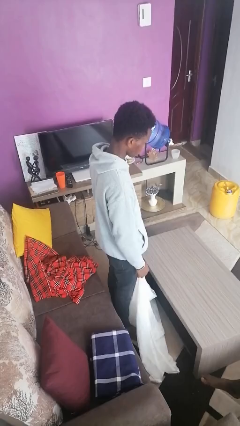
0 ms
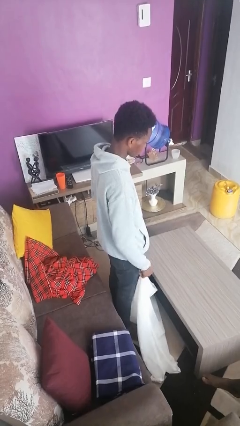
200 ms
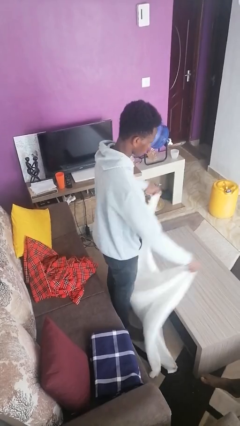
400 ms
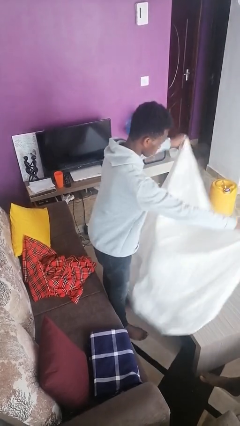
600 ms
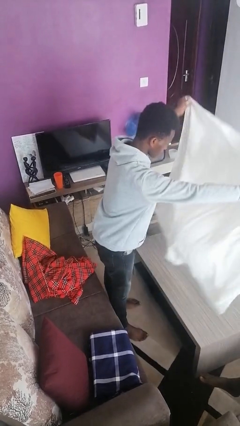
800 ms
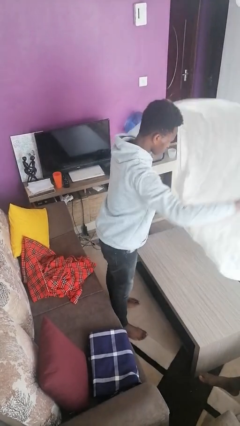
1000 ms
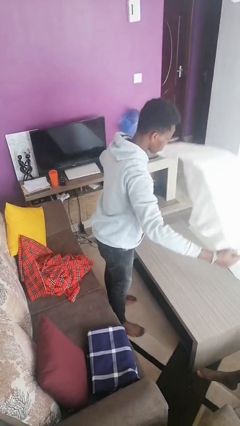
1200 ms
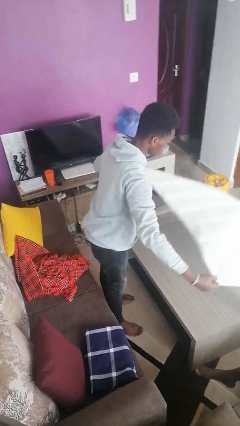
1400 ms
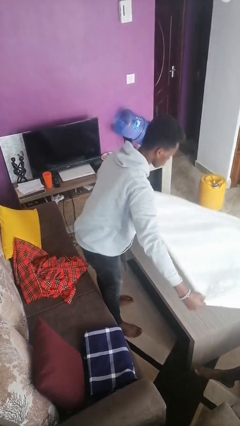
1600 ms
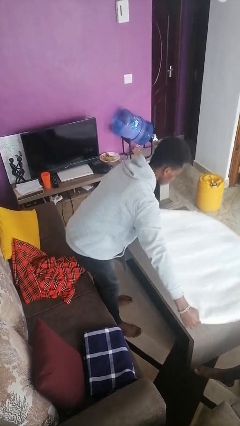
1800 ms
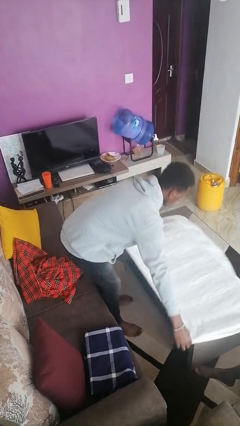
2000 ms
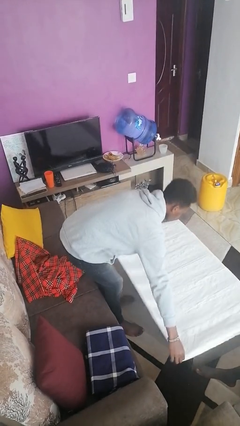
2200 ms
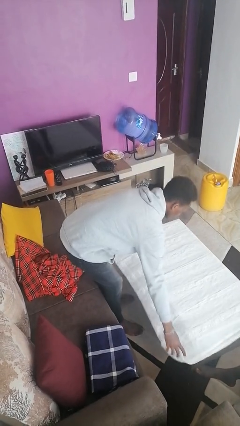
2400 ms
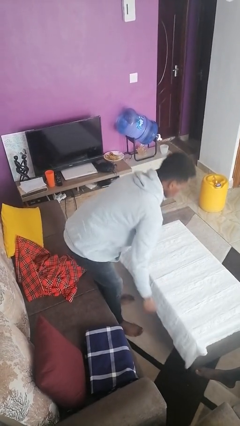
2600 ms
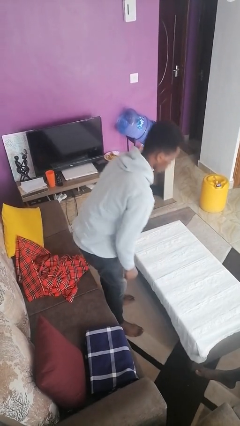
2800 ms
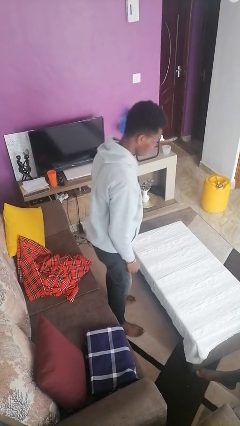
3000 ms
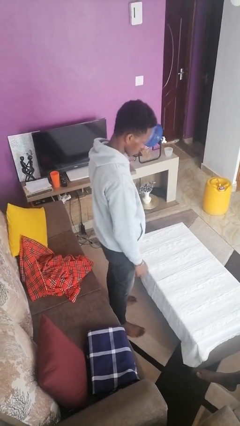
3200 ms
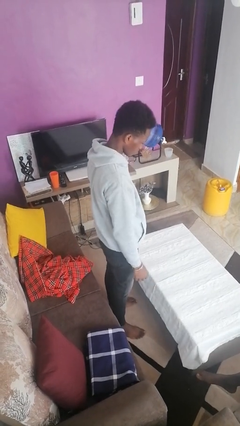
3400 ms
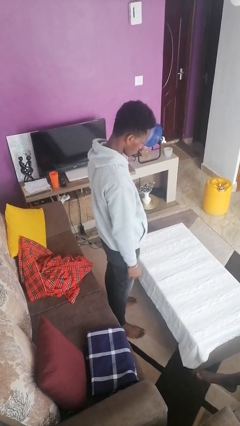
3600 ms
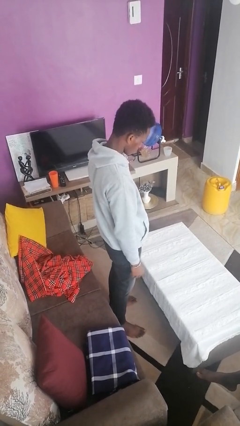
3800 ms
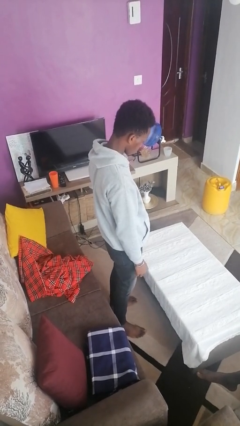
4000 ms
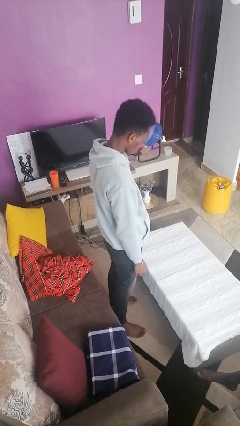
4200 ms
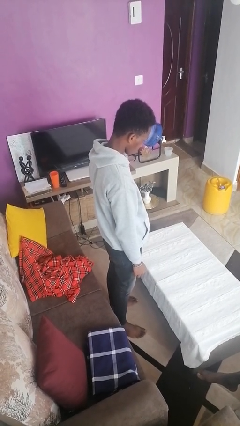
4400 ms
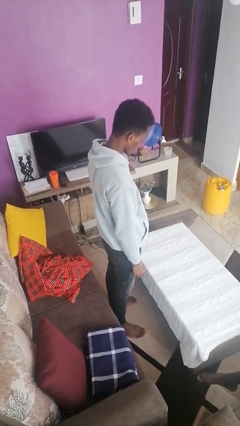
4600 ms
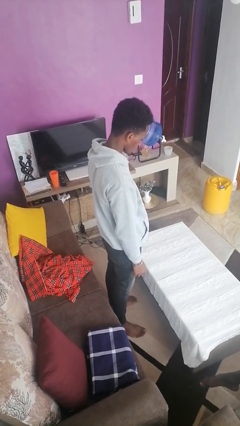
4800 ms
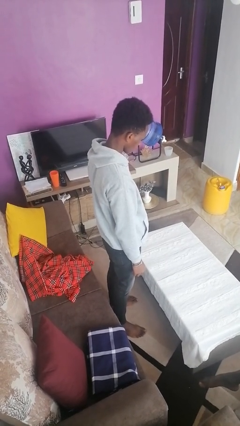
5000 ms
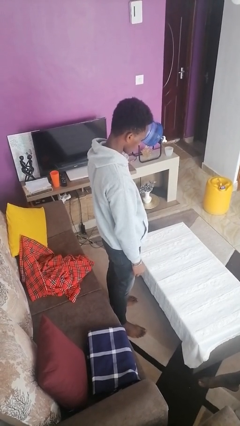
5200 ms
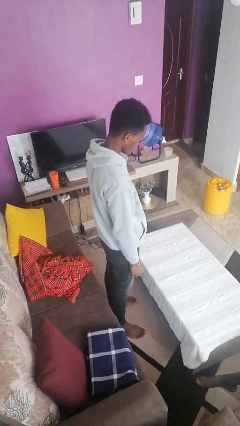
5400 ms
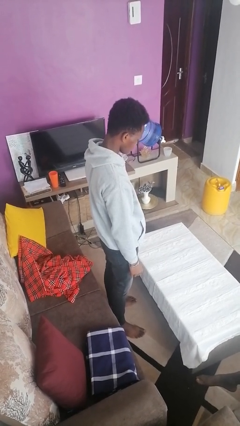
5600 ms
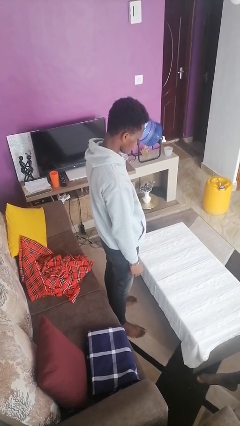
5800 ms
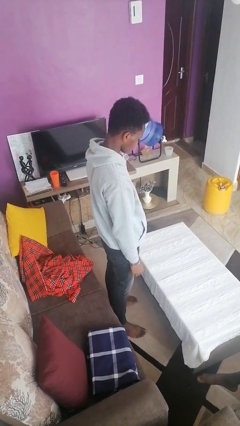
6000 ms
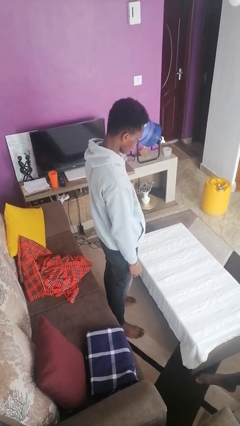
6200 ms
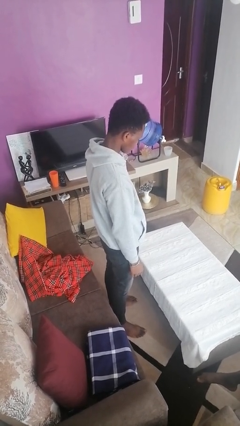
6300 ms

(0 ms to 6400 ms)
person spreads tablecloth

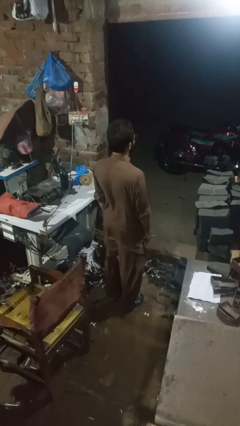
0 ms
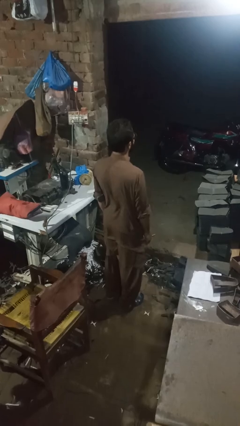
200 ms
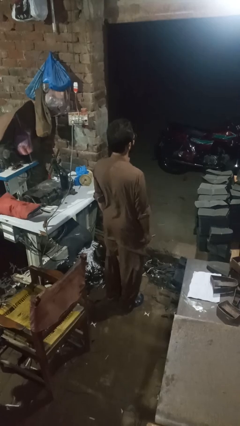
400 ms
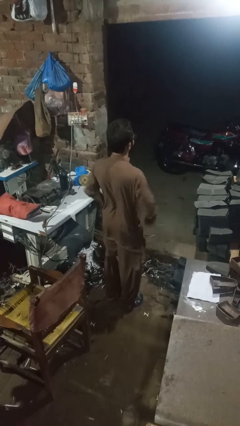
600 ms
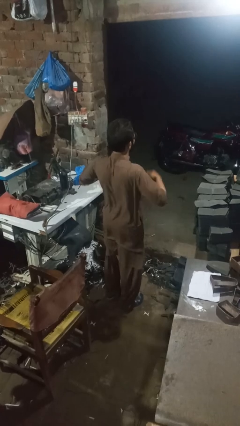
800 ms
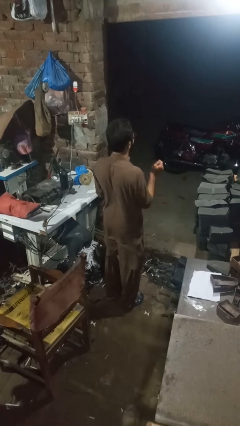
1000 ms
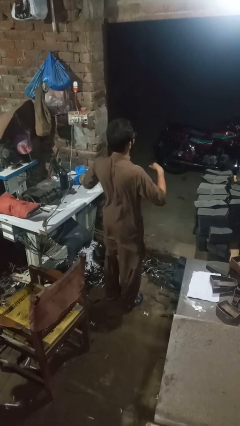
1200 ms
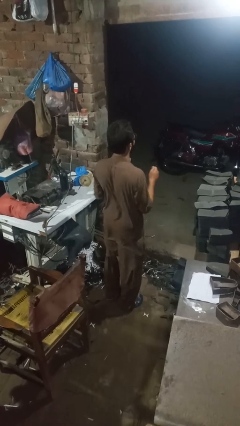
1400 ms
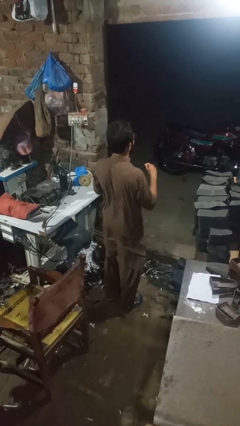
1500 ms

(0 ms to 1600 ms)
person dances in place

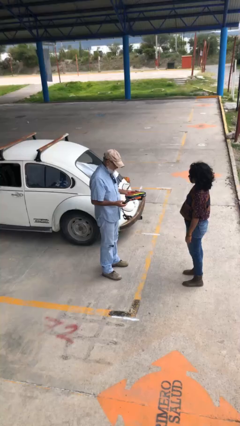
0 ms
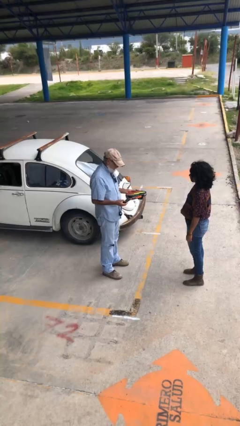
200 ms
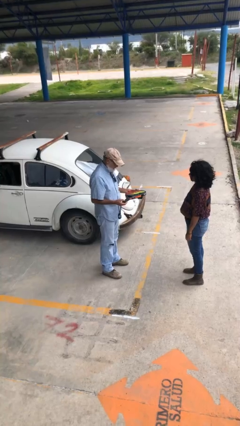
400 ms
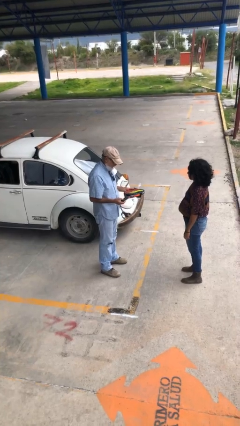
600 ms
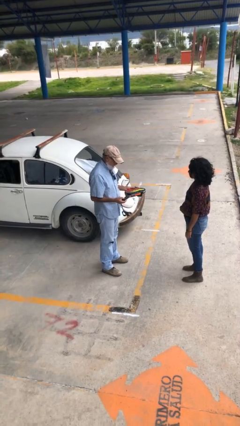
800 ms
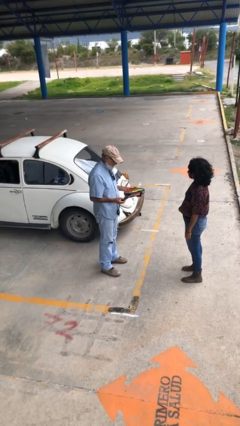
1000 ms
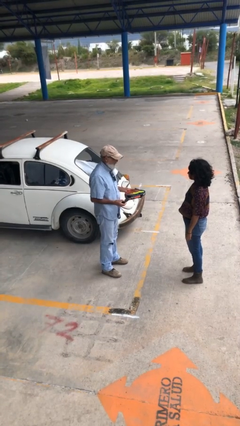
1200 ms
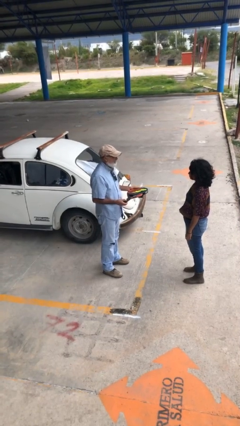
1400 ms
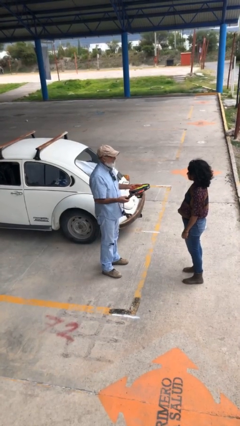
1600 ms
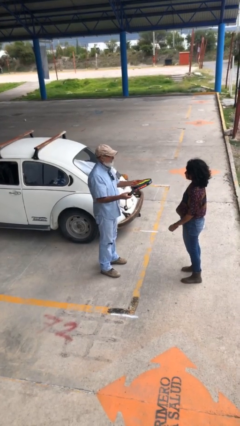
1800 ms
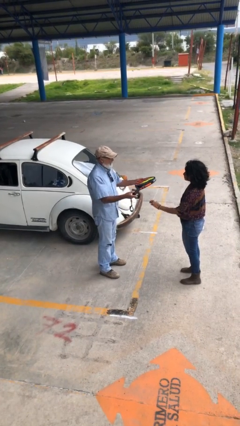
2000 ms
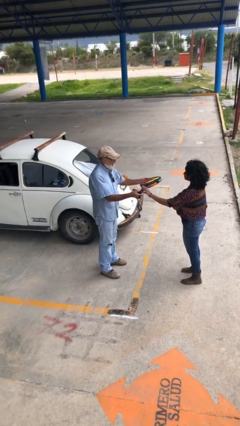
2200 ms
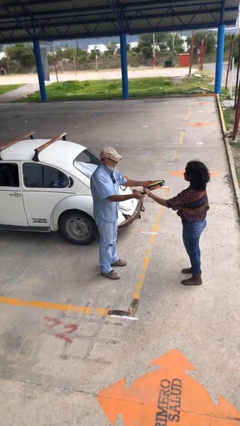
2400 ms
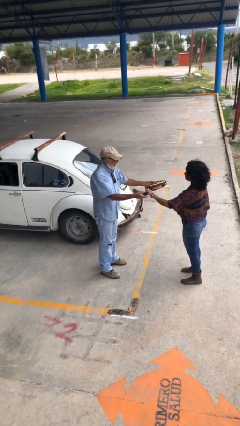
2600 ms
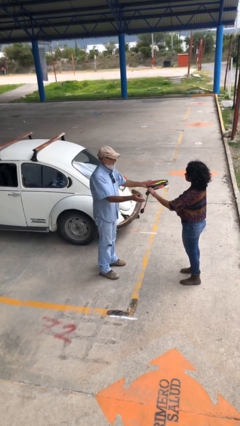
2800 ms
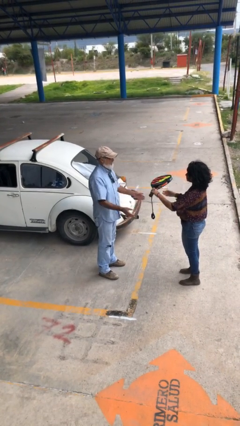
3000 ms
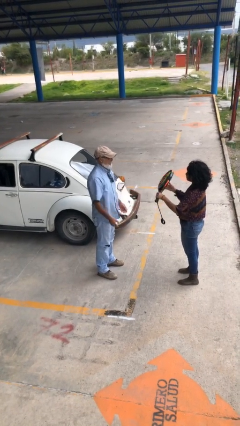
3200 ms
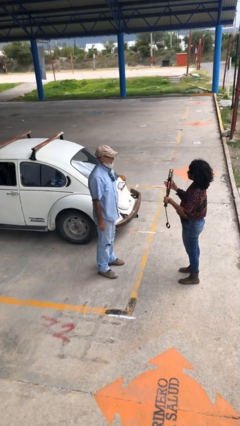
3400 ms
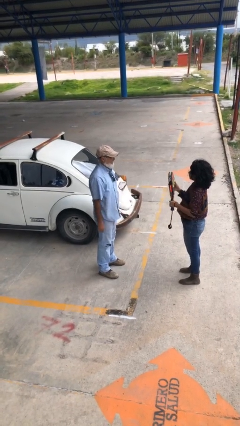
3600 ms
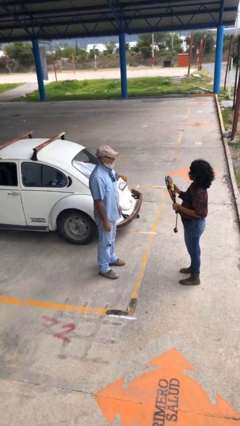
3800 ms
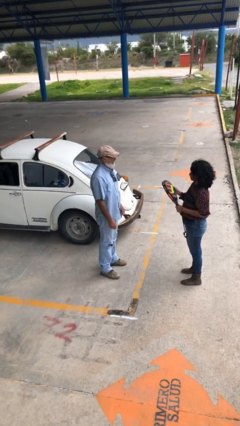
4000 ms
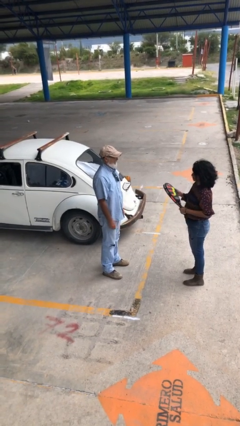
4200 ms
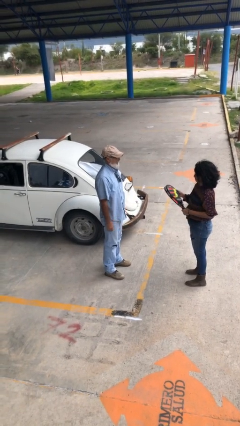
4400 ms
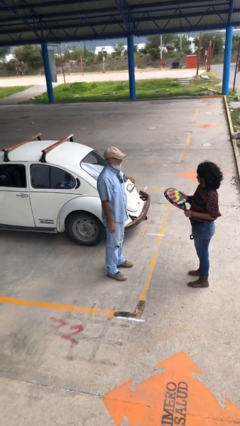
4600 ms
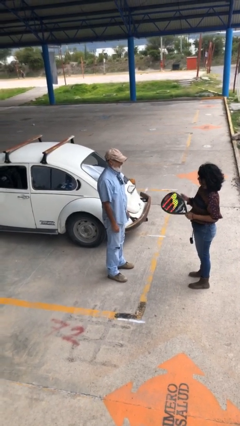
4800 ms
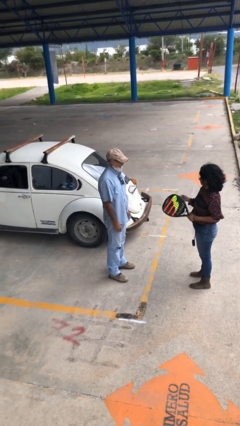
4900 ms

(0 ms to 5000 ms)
person transfers object to person

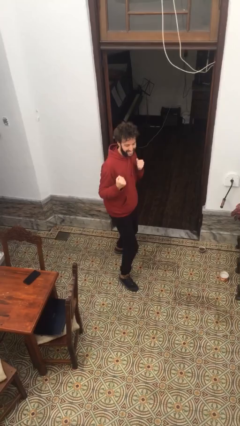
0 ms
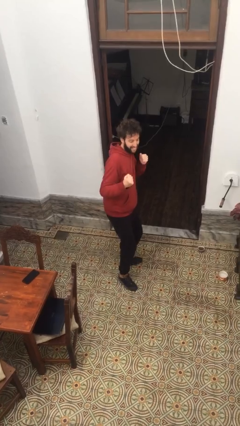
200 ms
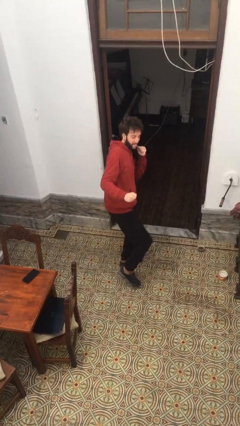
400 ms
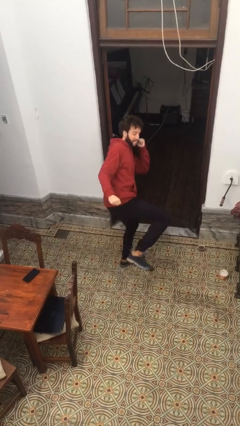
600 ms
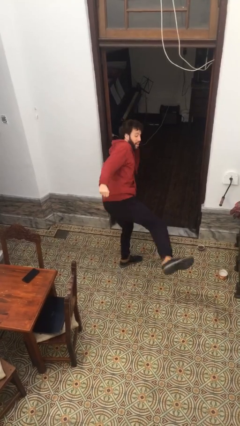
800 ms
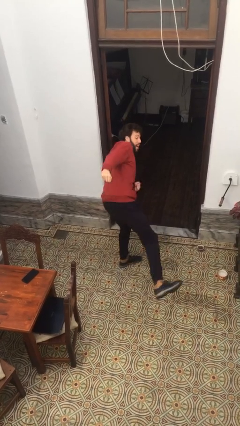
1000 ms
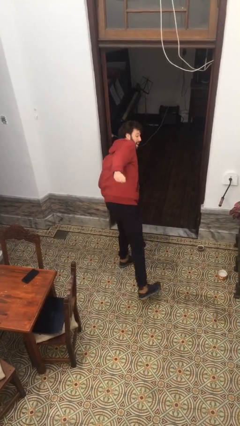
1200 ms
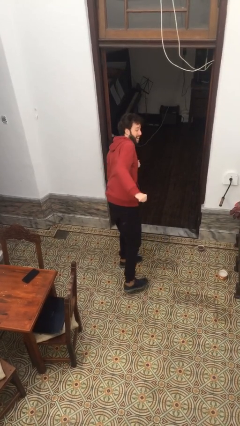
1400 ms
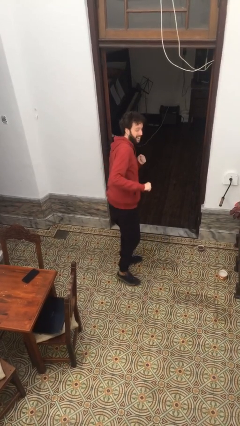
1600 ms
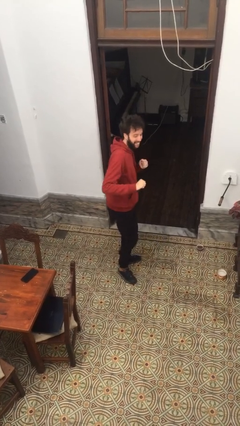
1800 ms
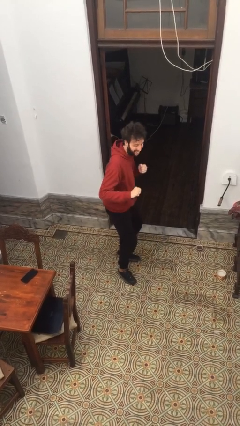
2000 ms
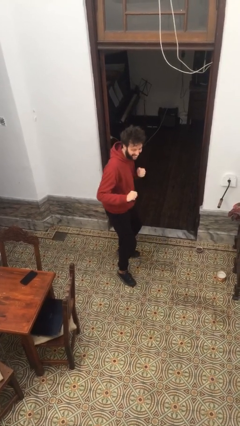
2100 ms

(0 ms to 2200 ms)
person karate kicks

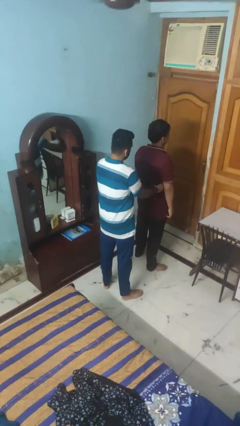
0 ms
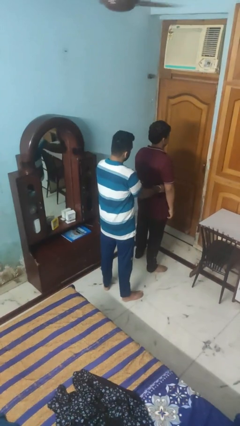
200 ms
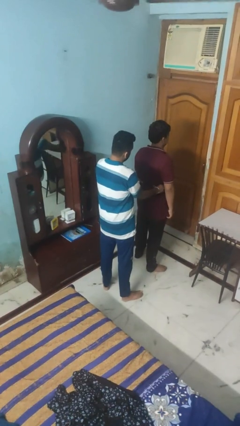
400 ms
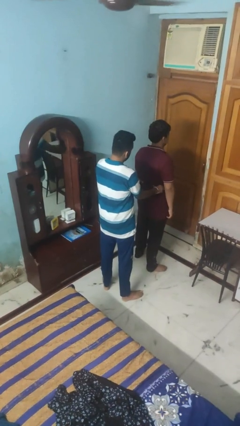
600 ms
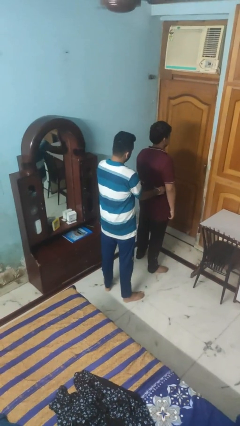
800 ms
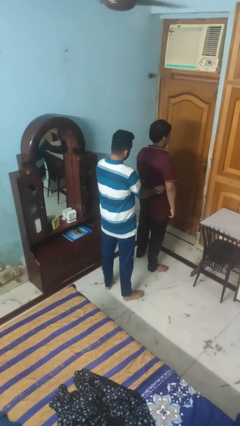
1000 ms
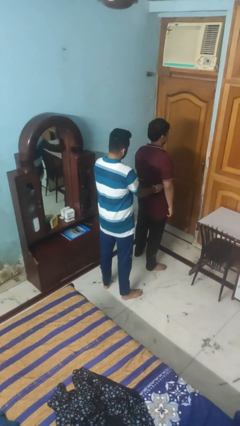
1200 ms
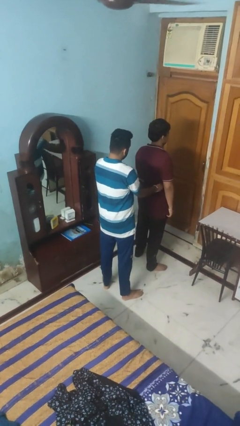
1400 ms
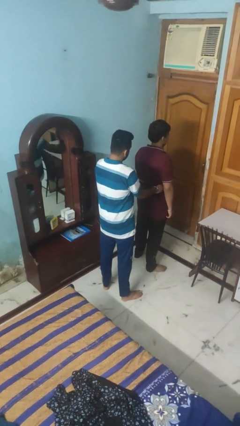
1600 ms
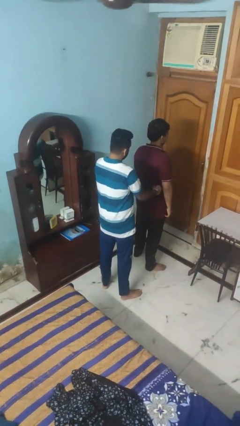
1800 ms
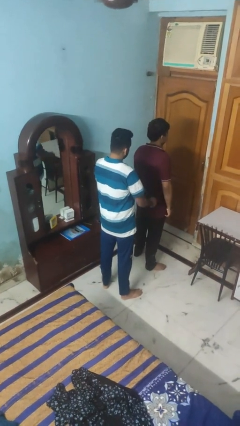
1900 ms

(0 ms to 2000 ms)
person tickles person

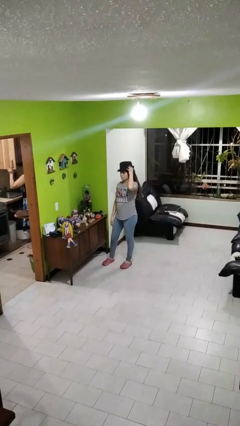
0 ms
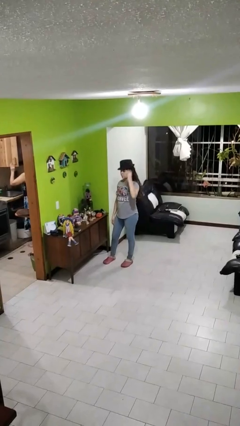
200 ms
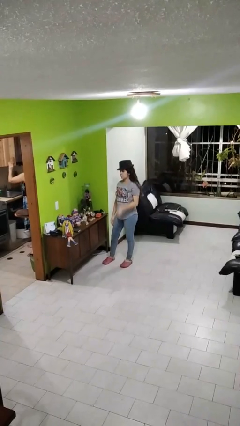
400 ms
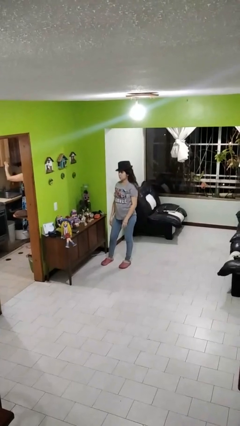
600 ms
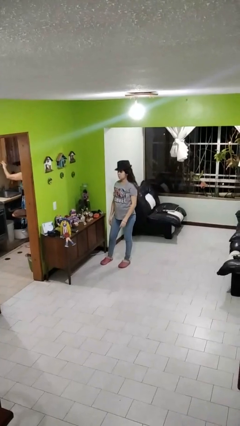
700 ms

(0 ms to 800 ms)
person puts on hat
